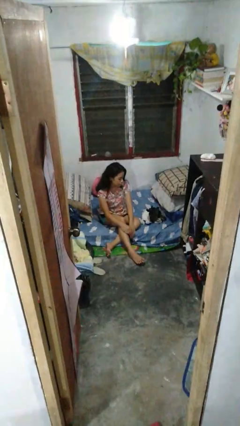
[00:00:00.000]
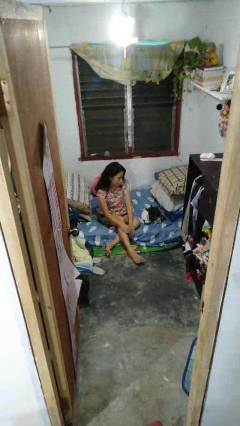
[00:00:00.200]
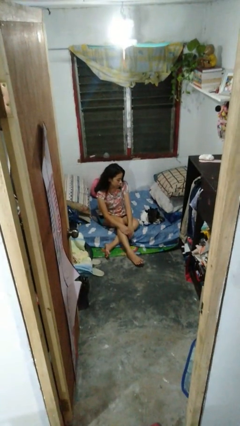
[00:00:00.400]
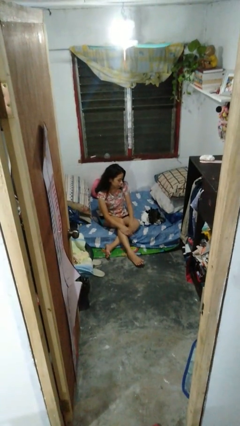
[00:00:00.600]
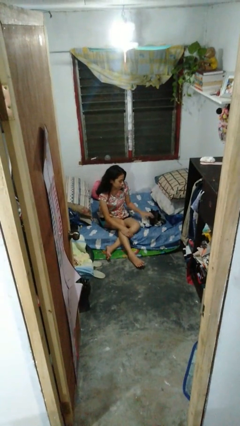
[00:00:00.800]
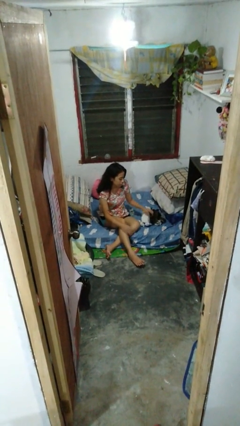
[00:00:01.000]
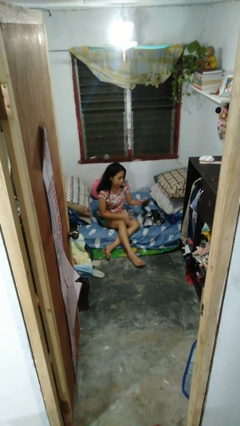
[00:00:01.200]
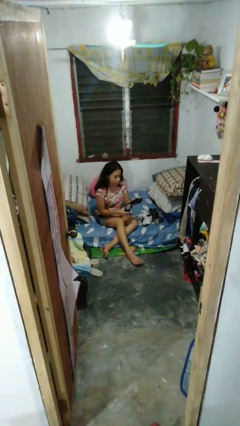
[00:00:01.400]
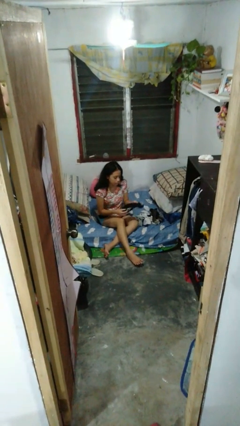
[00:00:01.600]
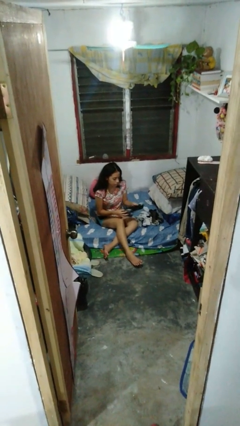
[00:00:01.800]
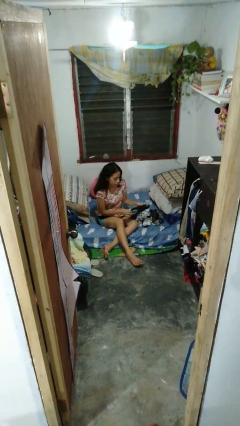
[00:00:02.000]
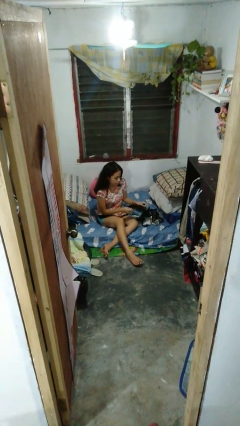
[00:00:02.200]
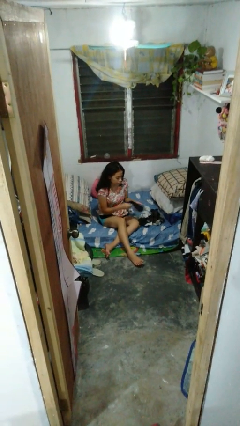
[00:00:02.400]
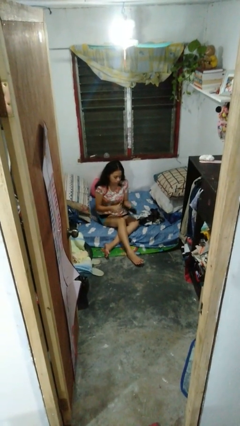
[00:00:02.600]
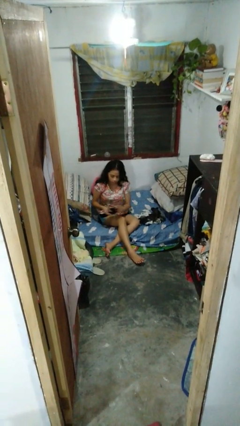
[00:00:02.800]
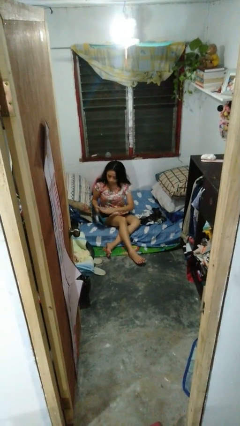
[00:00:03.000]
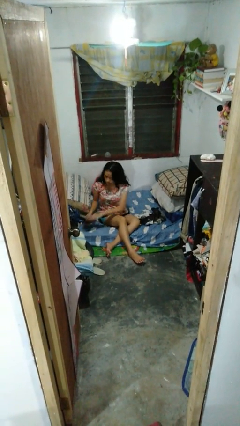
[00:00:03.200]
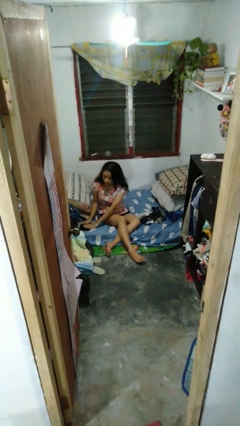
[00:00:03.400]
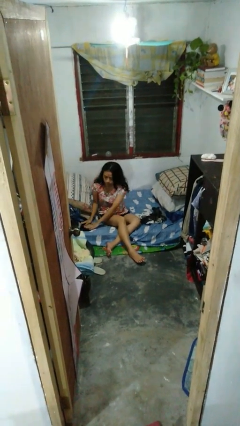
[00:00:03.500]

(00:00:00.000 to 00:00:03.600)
person folds socks

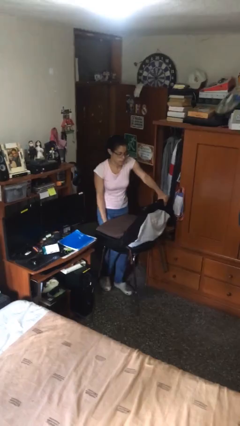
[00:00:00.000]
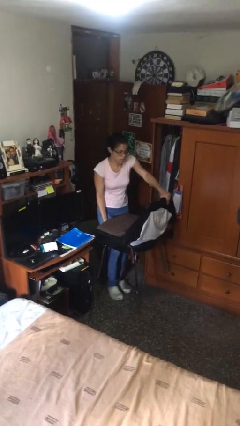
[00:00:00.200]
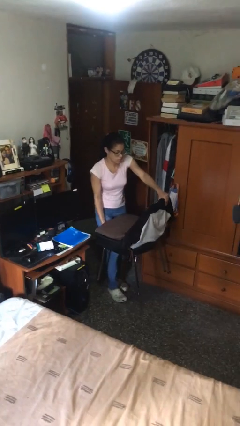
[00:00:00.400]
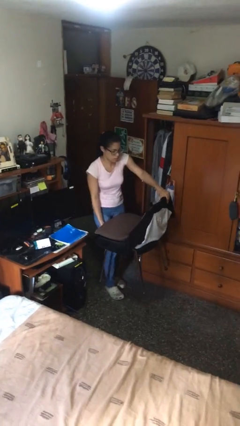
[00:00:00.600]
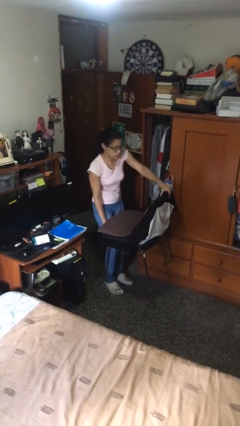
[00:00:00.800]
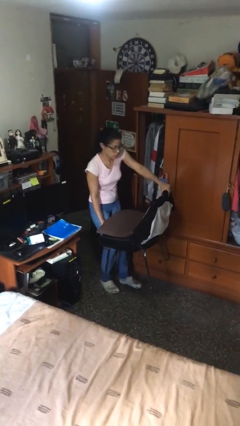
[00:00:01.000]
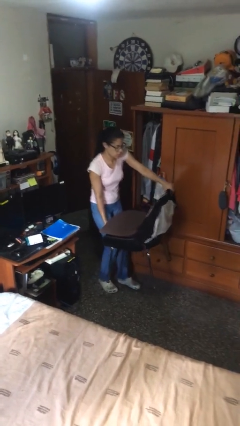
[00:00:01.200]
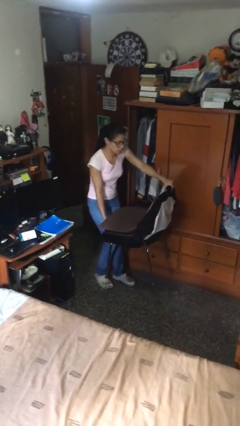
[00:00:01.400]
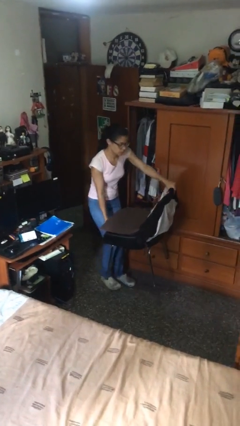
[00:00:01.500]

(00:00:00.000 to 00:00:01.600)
person carries heavy object

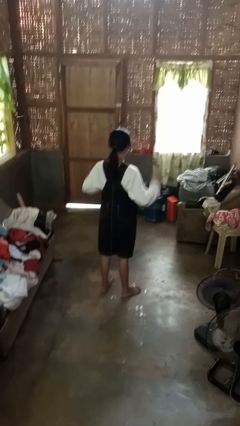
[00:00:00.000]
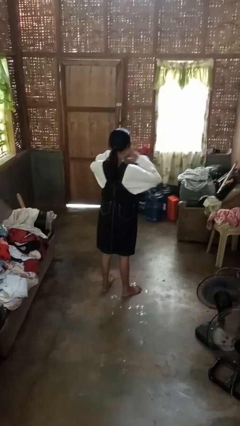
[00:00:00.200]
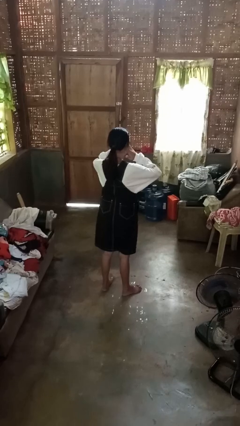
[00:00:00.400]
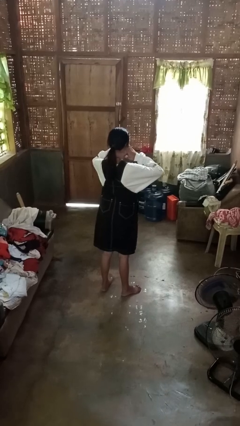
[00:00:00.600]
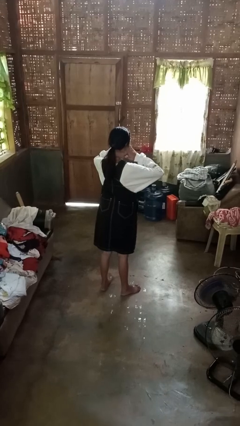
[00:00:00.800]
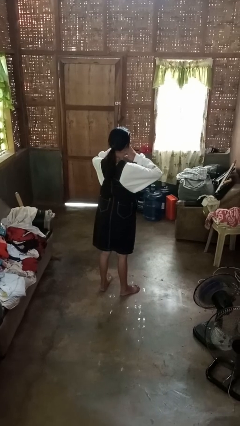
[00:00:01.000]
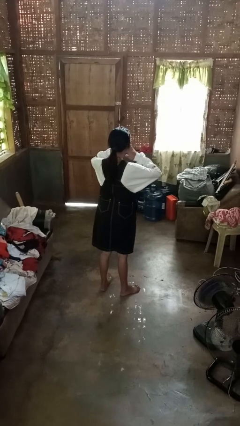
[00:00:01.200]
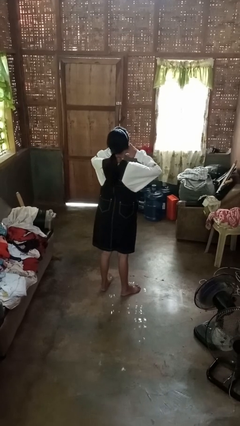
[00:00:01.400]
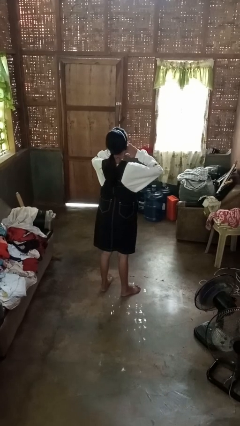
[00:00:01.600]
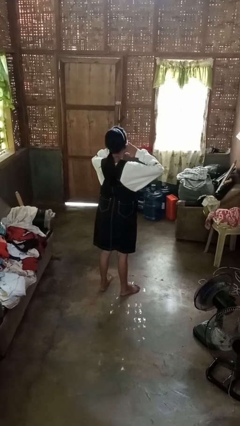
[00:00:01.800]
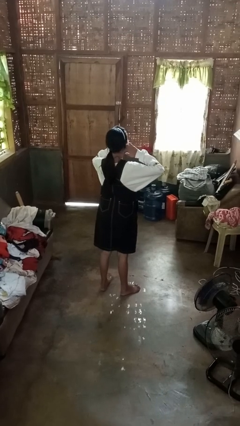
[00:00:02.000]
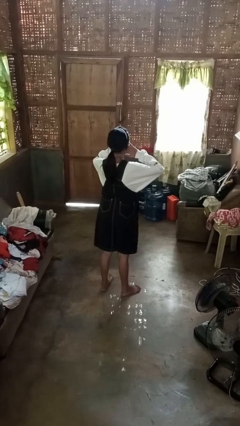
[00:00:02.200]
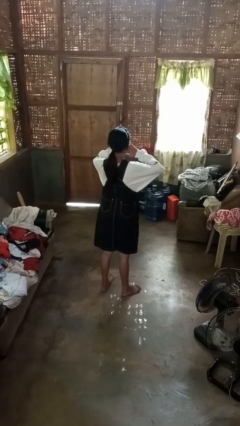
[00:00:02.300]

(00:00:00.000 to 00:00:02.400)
person puts fingers in ear

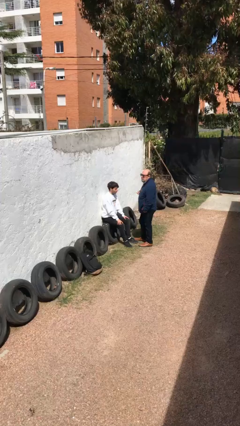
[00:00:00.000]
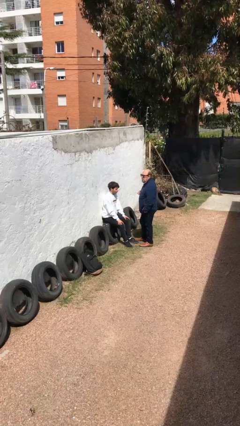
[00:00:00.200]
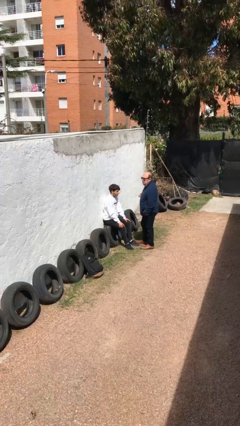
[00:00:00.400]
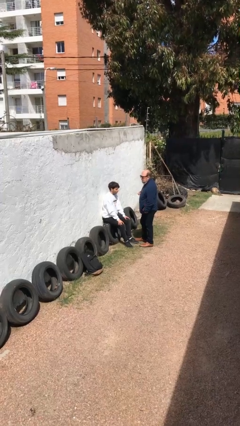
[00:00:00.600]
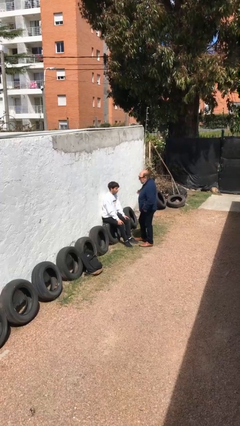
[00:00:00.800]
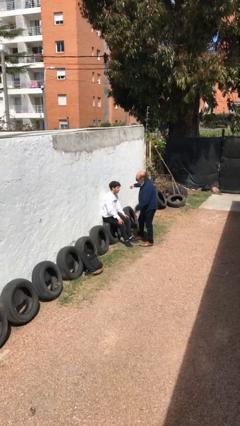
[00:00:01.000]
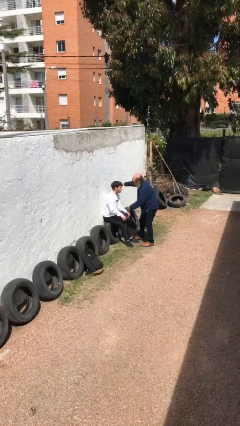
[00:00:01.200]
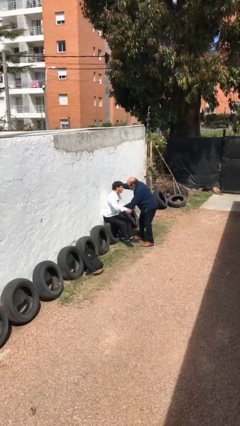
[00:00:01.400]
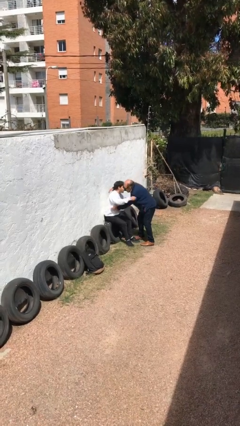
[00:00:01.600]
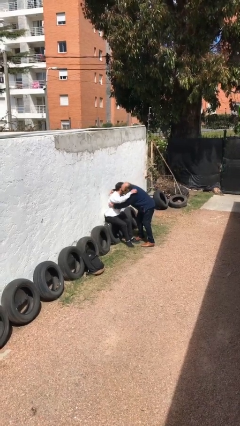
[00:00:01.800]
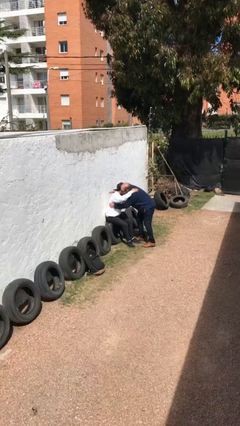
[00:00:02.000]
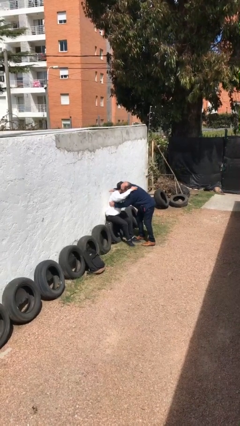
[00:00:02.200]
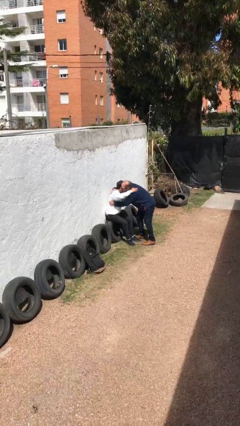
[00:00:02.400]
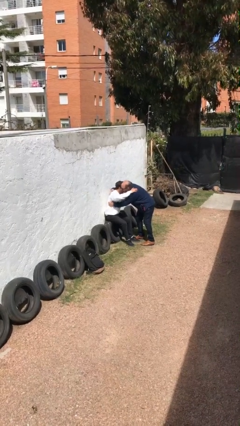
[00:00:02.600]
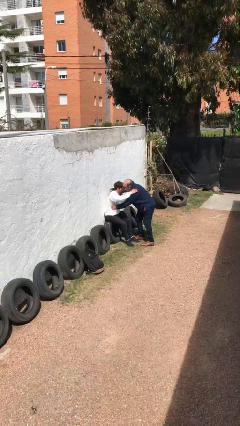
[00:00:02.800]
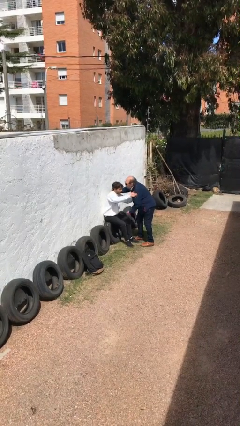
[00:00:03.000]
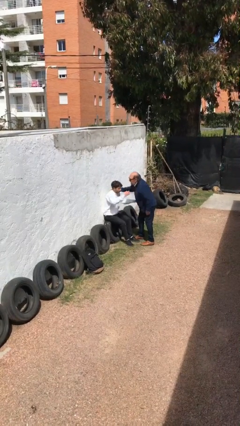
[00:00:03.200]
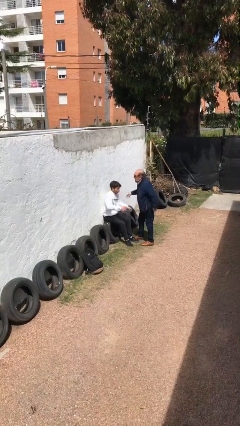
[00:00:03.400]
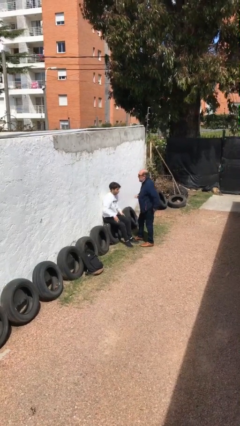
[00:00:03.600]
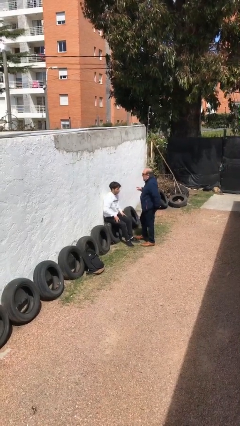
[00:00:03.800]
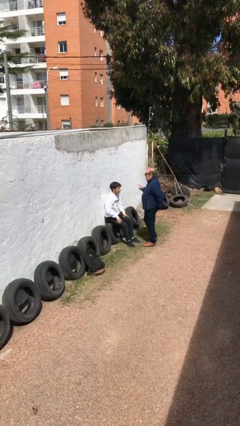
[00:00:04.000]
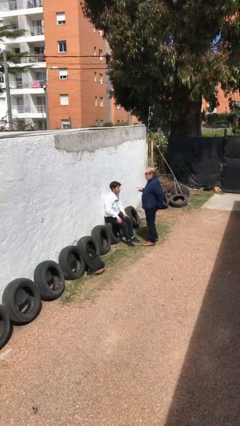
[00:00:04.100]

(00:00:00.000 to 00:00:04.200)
person embraces person

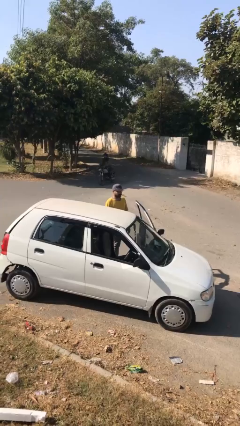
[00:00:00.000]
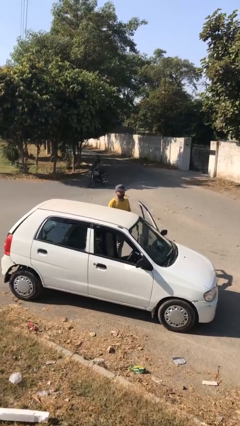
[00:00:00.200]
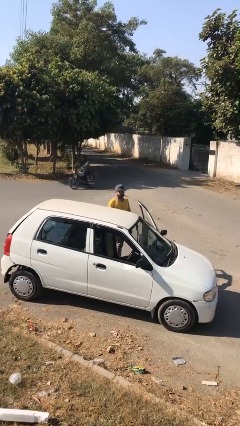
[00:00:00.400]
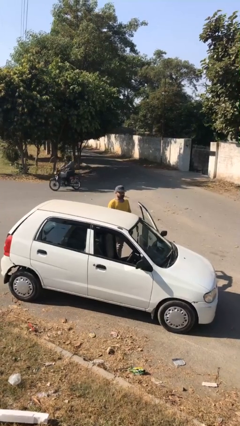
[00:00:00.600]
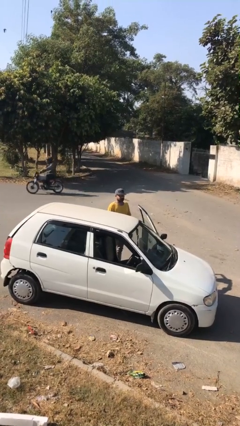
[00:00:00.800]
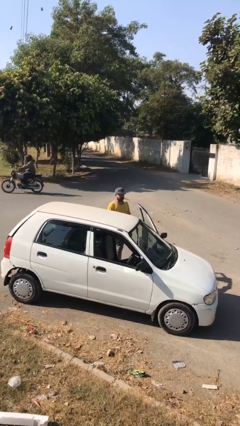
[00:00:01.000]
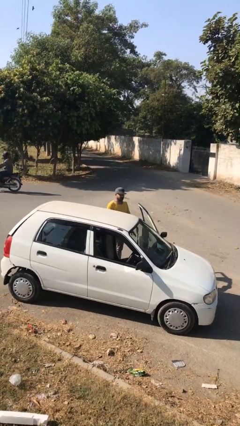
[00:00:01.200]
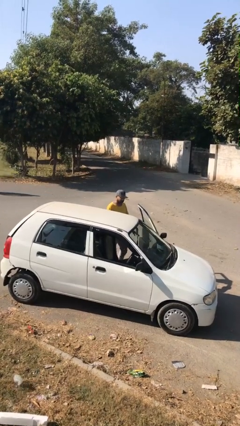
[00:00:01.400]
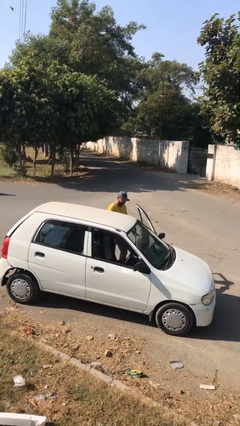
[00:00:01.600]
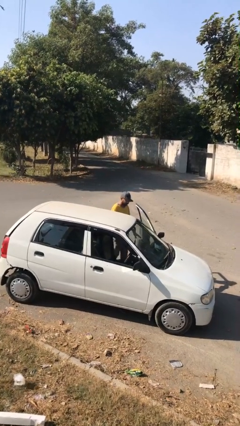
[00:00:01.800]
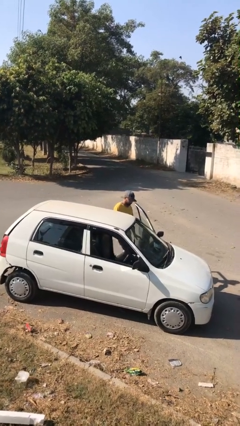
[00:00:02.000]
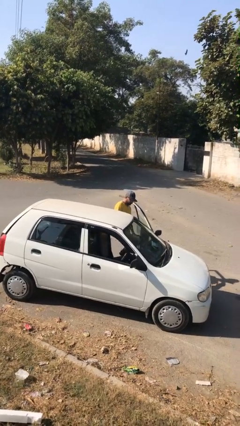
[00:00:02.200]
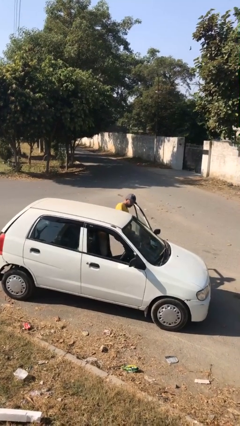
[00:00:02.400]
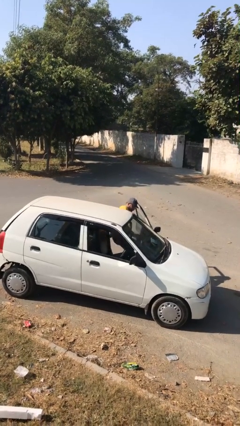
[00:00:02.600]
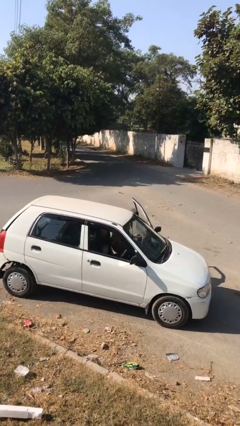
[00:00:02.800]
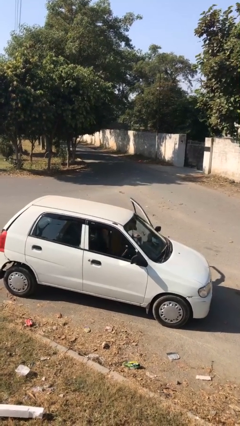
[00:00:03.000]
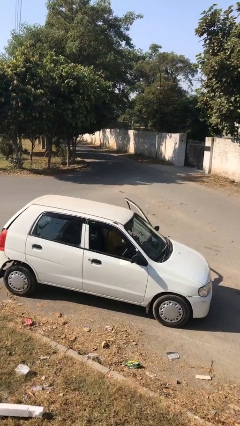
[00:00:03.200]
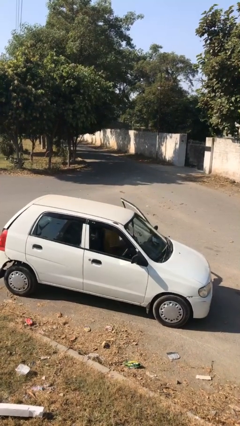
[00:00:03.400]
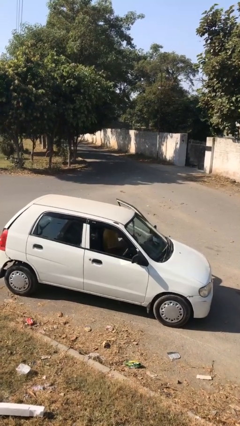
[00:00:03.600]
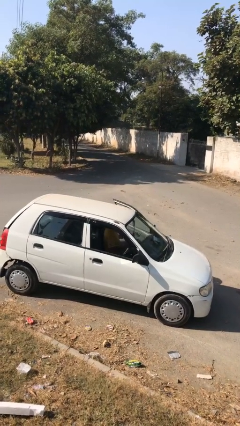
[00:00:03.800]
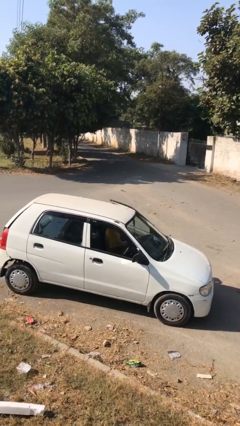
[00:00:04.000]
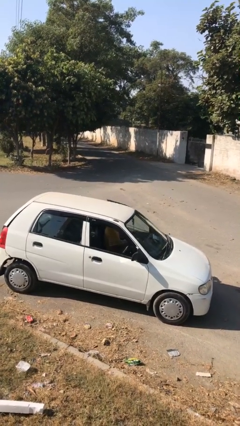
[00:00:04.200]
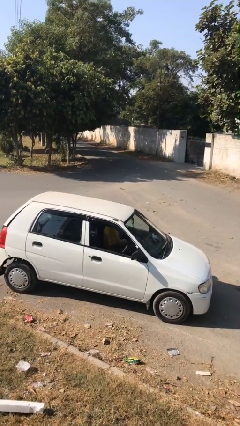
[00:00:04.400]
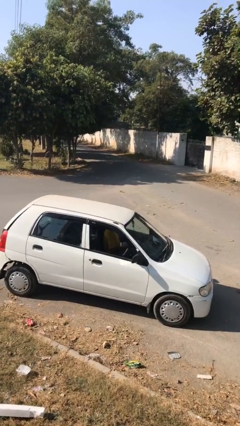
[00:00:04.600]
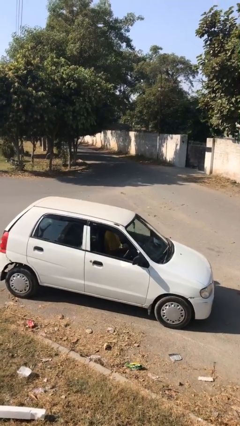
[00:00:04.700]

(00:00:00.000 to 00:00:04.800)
person enters car

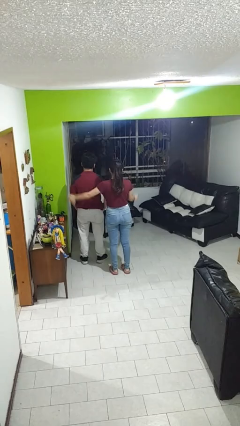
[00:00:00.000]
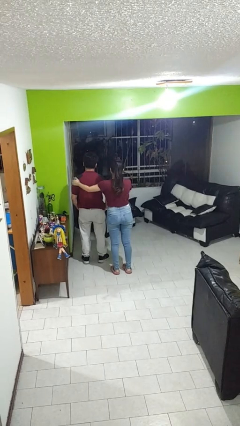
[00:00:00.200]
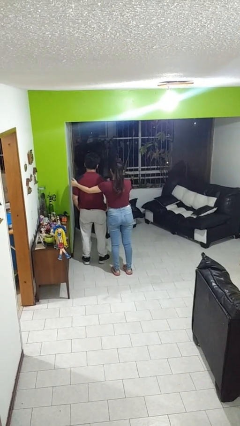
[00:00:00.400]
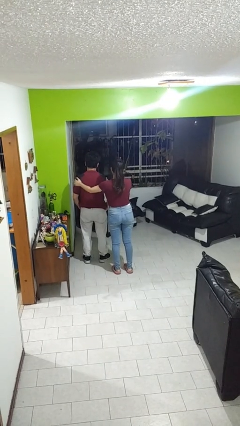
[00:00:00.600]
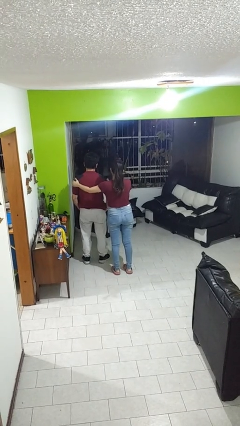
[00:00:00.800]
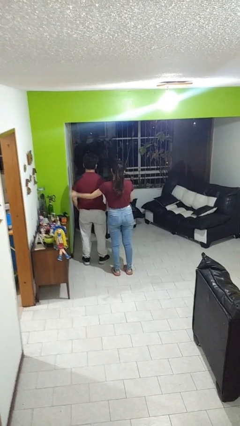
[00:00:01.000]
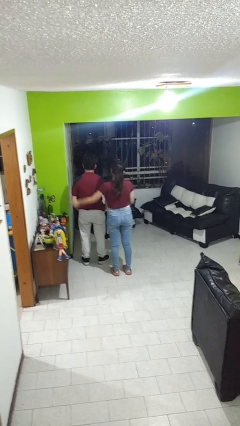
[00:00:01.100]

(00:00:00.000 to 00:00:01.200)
person pounds shoulders of person
